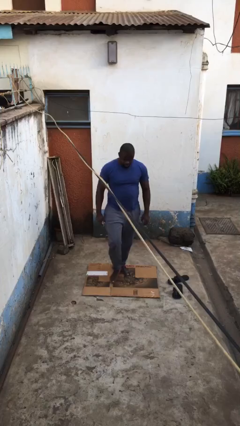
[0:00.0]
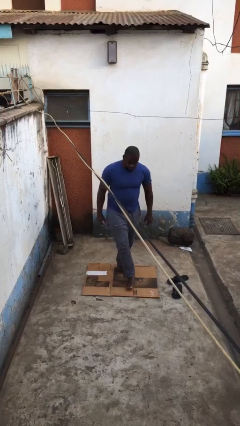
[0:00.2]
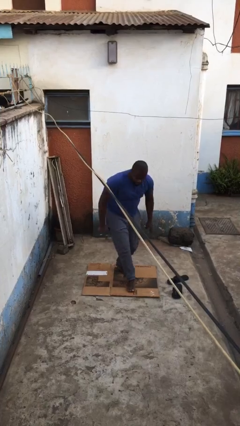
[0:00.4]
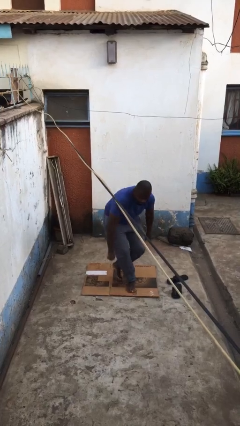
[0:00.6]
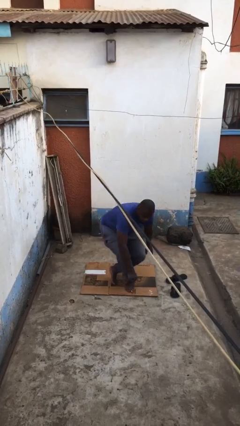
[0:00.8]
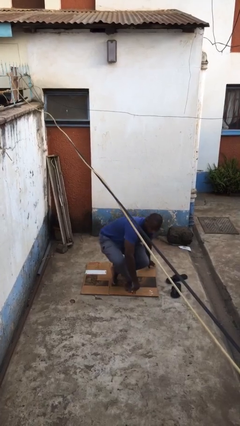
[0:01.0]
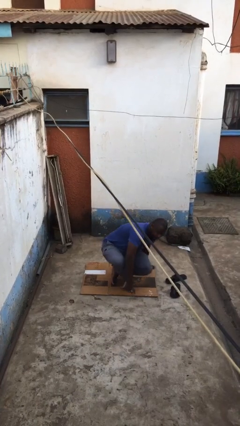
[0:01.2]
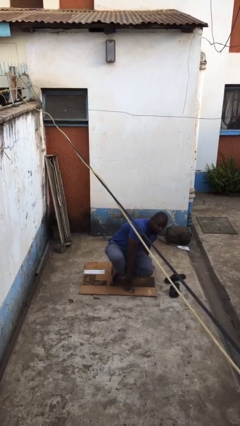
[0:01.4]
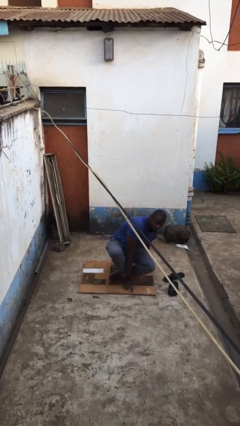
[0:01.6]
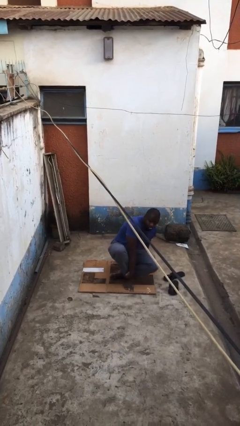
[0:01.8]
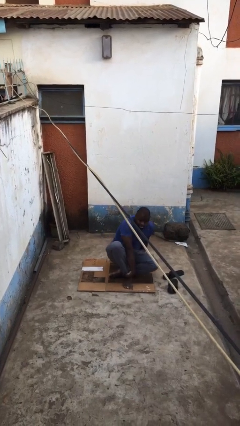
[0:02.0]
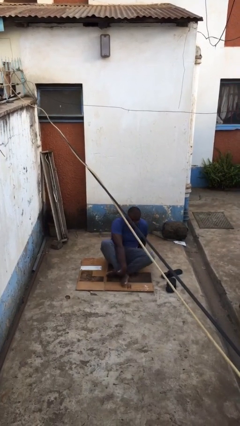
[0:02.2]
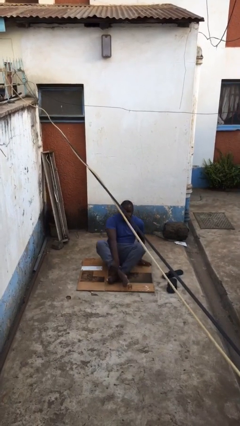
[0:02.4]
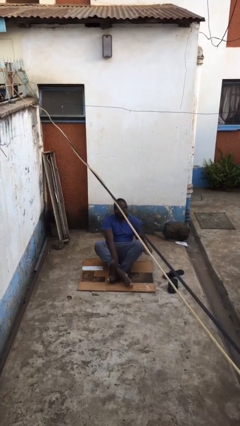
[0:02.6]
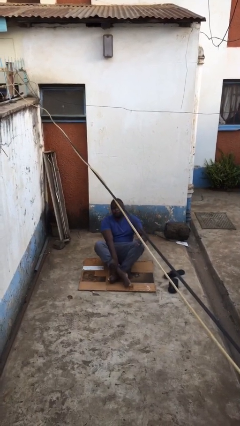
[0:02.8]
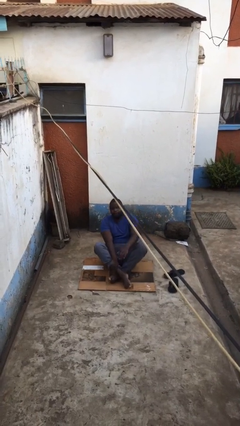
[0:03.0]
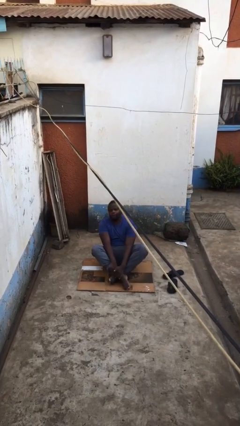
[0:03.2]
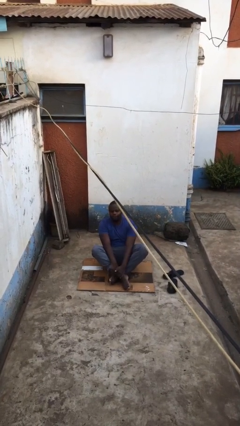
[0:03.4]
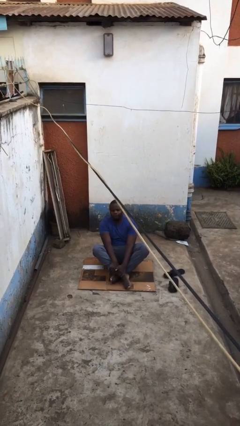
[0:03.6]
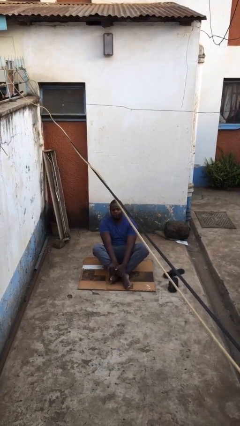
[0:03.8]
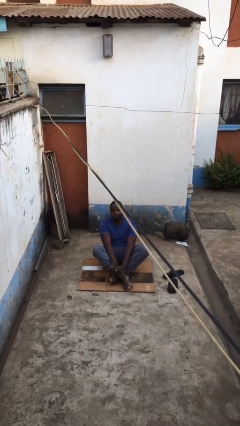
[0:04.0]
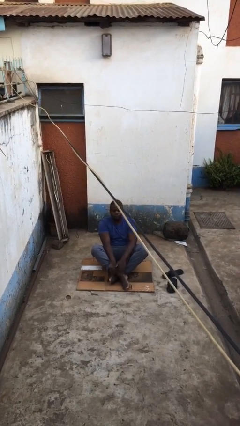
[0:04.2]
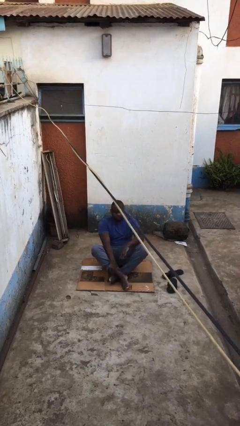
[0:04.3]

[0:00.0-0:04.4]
person sits crisscross

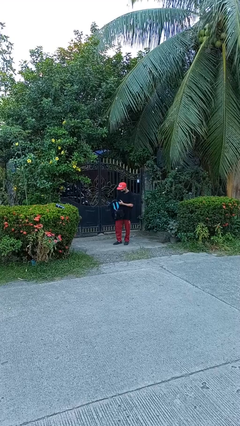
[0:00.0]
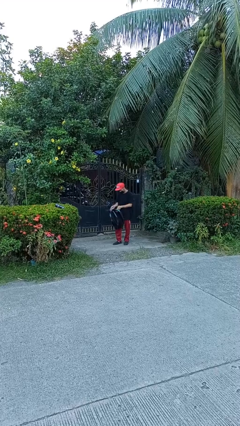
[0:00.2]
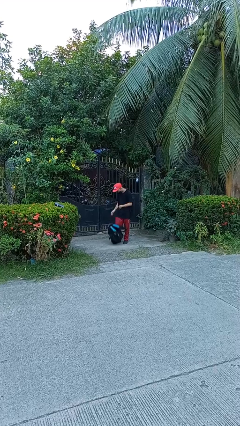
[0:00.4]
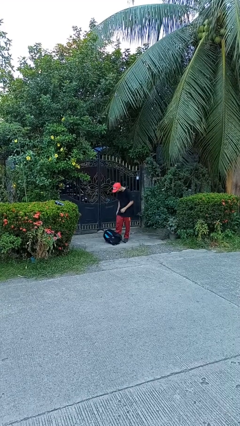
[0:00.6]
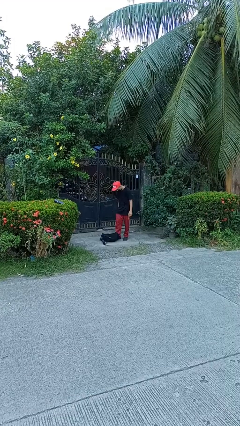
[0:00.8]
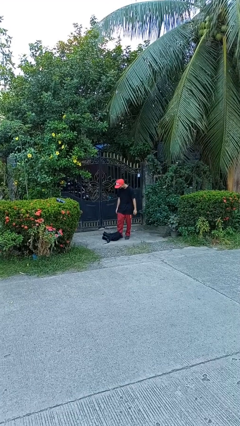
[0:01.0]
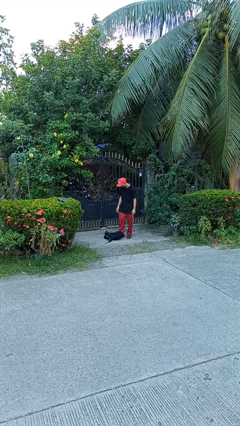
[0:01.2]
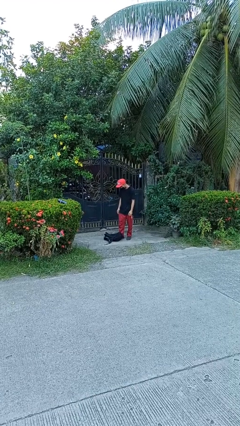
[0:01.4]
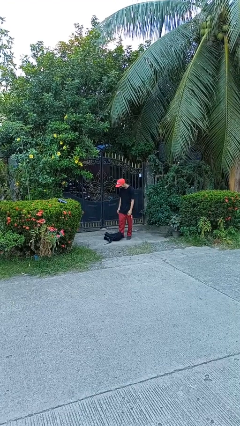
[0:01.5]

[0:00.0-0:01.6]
person drops object

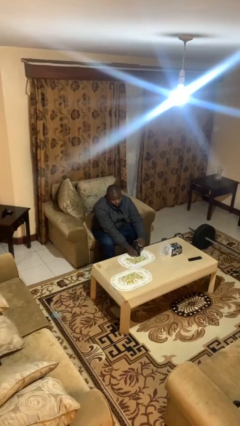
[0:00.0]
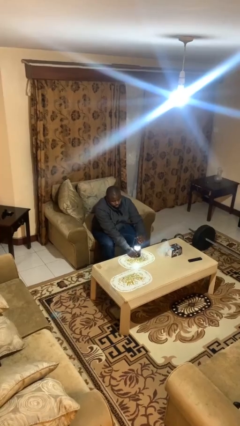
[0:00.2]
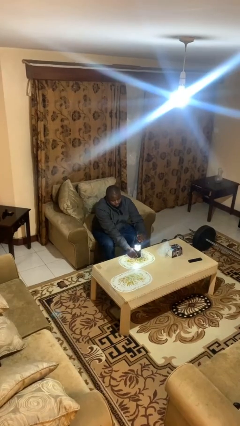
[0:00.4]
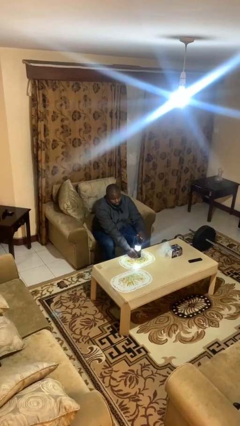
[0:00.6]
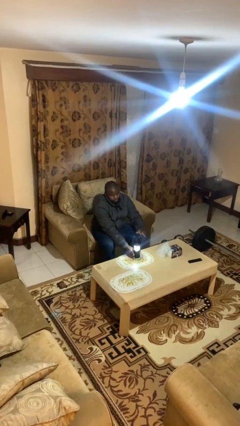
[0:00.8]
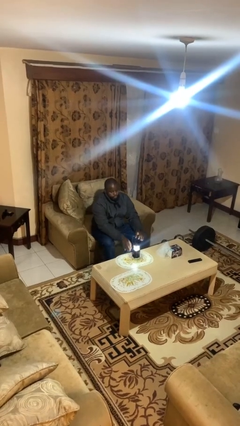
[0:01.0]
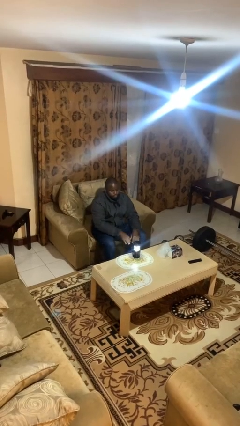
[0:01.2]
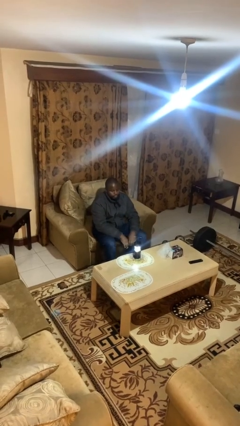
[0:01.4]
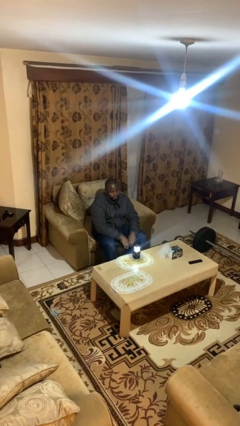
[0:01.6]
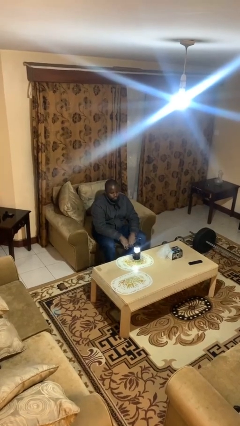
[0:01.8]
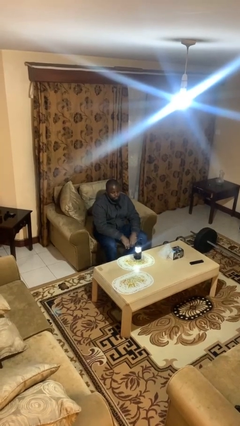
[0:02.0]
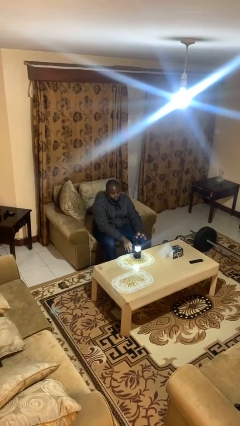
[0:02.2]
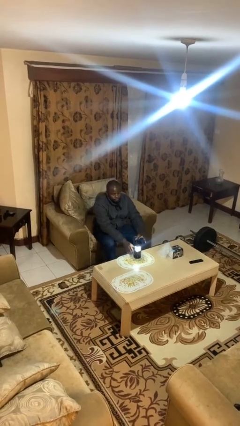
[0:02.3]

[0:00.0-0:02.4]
person turns on lamp

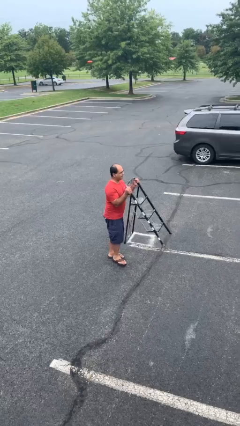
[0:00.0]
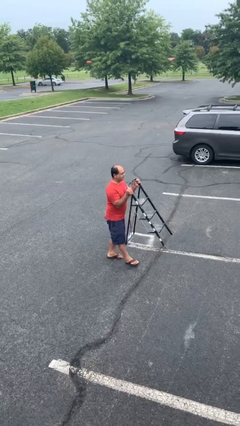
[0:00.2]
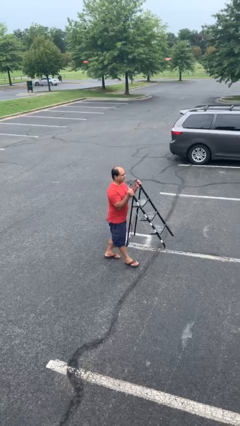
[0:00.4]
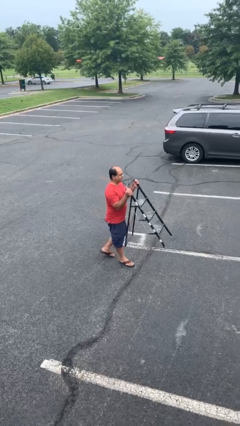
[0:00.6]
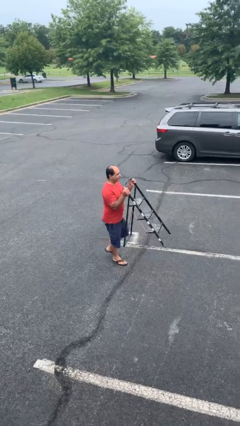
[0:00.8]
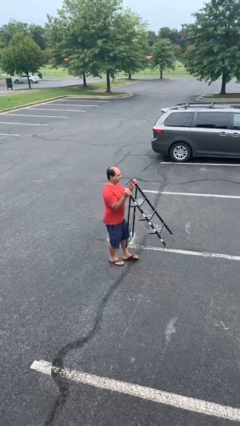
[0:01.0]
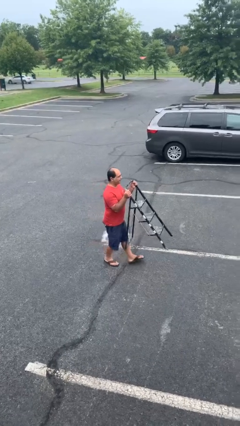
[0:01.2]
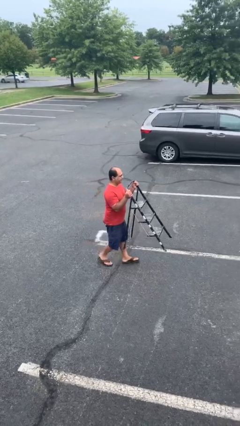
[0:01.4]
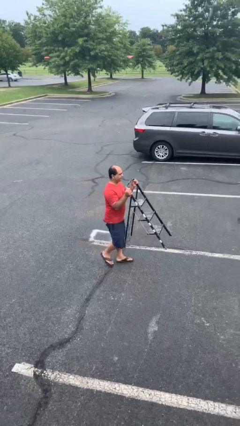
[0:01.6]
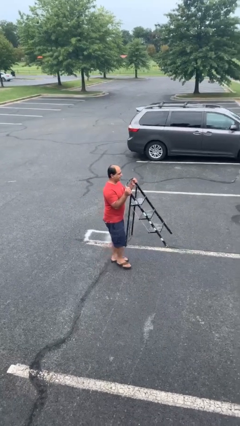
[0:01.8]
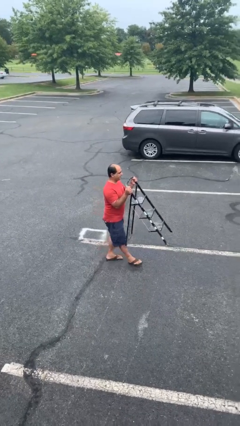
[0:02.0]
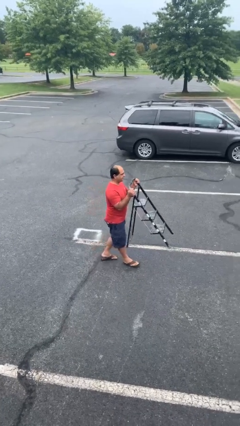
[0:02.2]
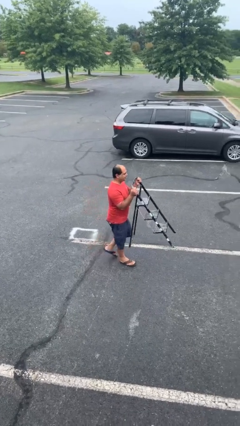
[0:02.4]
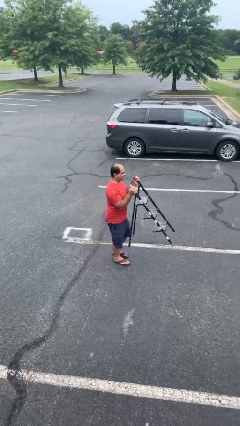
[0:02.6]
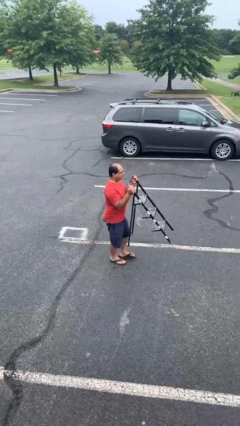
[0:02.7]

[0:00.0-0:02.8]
person carries heavy object

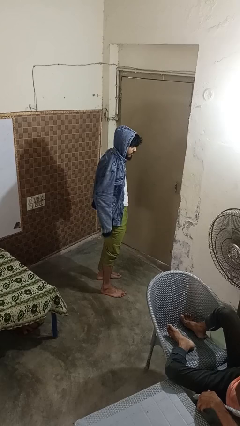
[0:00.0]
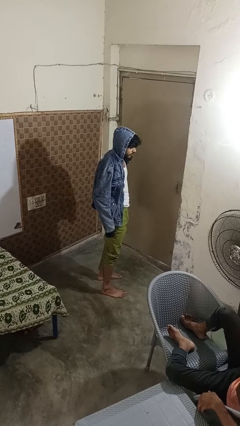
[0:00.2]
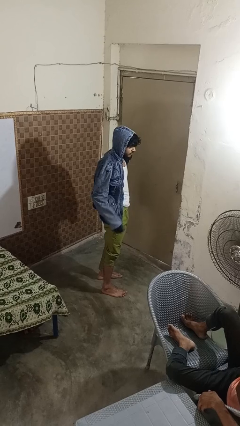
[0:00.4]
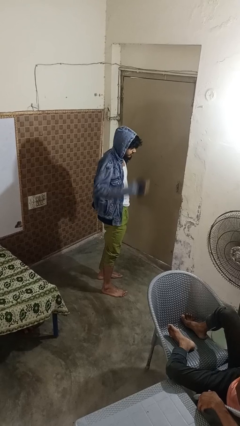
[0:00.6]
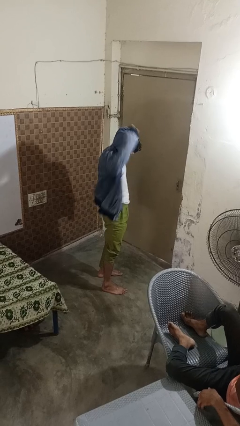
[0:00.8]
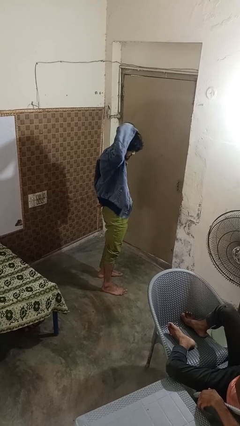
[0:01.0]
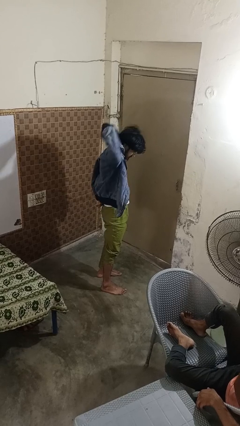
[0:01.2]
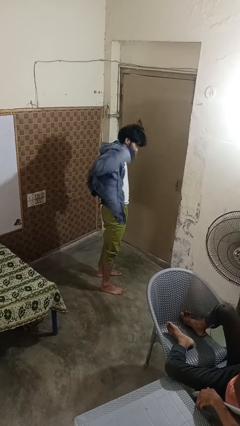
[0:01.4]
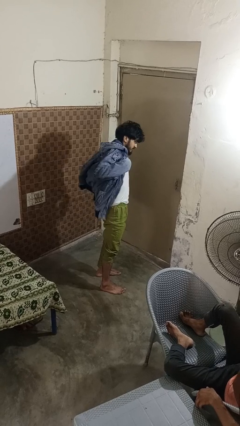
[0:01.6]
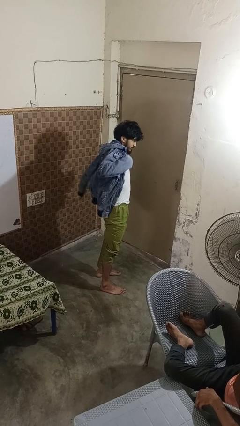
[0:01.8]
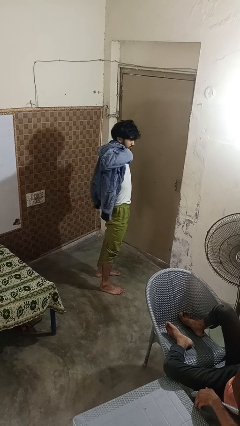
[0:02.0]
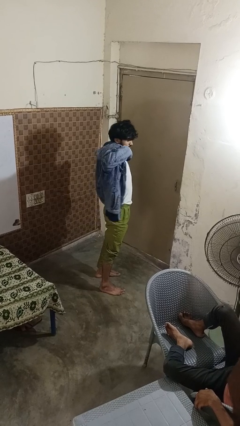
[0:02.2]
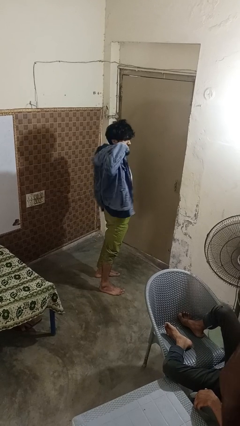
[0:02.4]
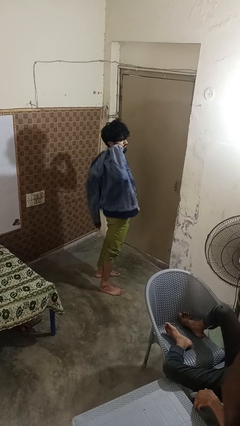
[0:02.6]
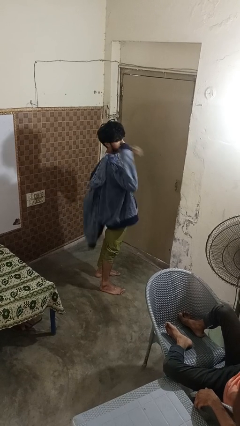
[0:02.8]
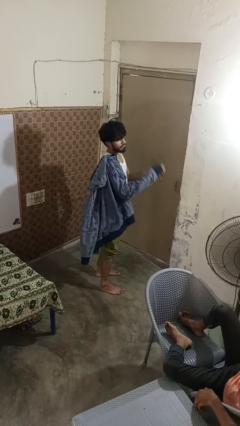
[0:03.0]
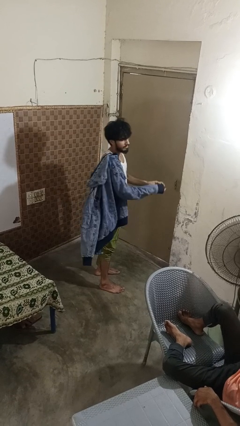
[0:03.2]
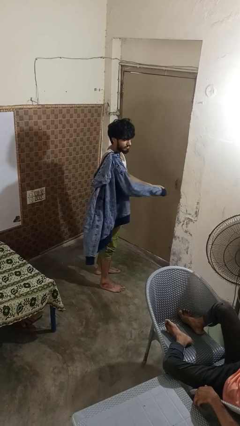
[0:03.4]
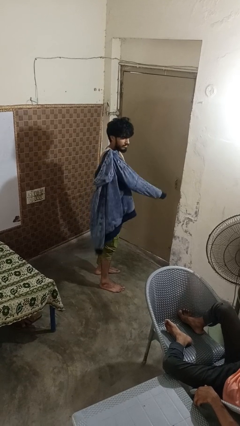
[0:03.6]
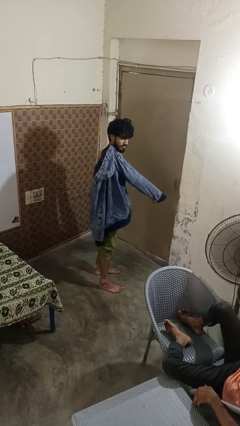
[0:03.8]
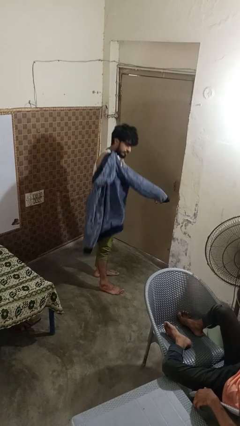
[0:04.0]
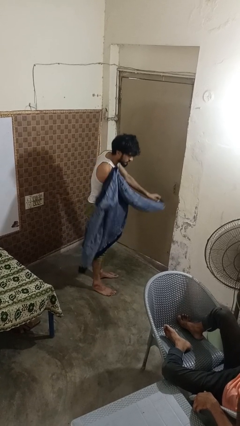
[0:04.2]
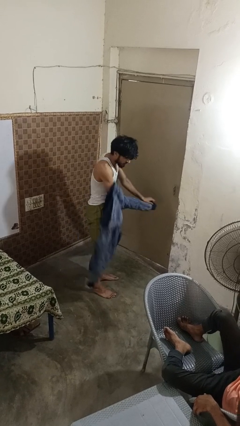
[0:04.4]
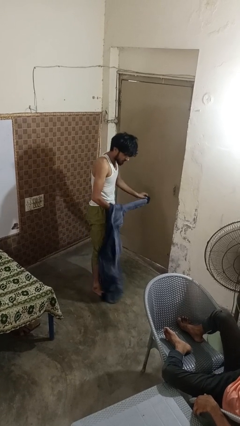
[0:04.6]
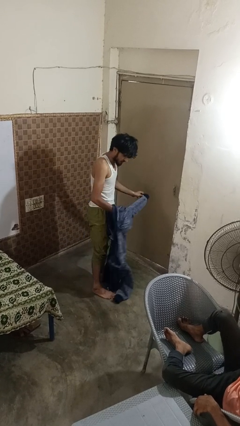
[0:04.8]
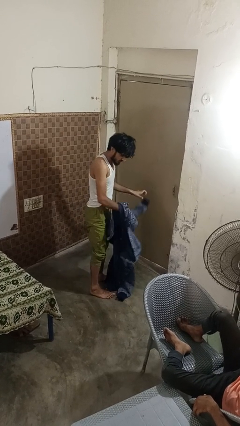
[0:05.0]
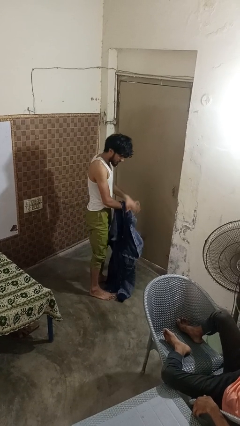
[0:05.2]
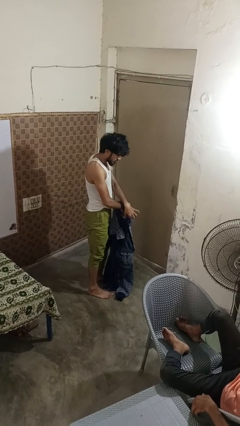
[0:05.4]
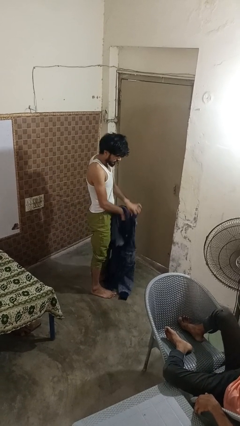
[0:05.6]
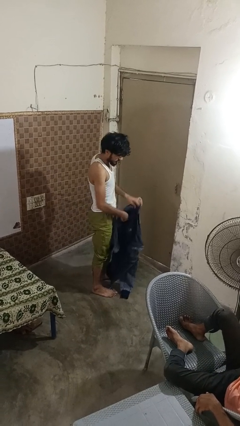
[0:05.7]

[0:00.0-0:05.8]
person takes off hoodie

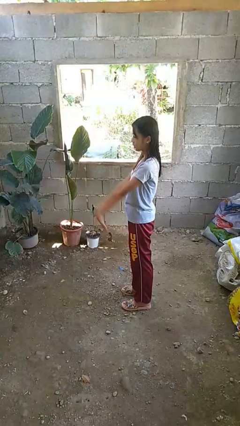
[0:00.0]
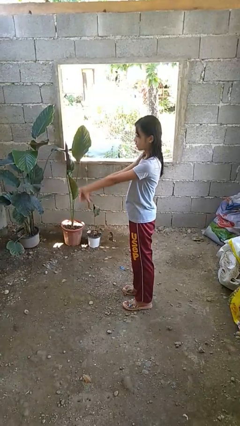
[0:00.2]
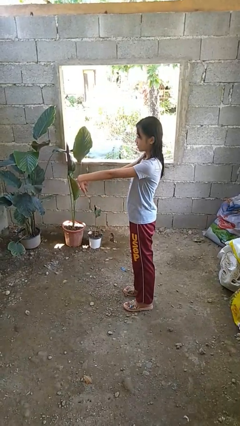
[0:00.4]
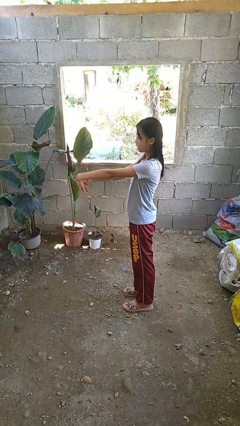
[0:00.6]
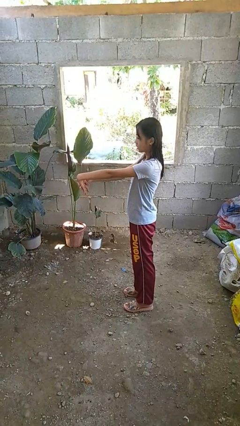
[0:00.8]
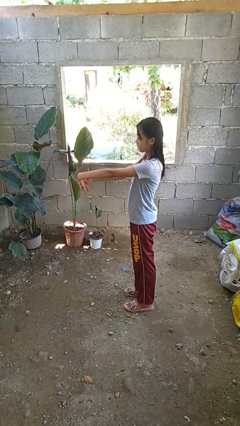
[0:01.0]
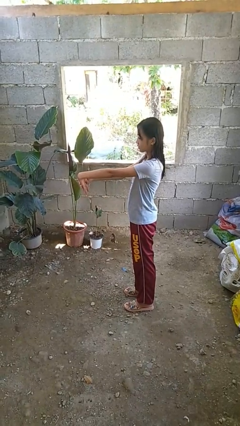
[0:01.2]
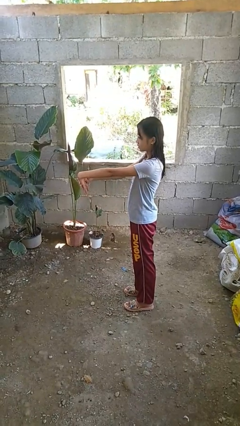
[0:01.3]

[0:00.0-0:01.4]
person cracks knuckles
